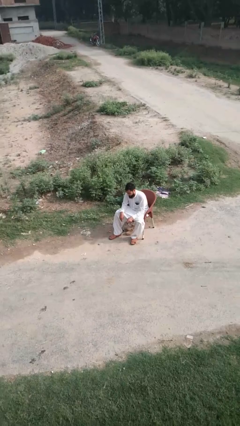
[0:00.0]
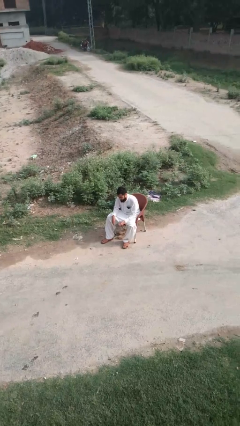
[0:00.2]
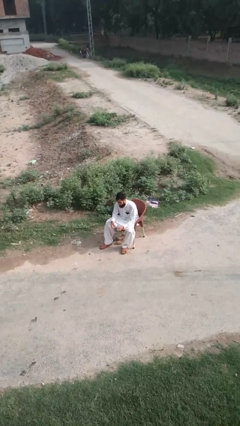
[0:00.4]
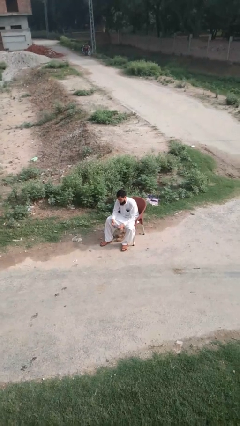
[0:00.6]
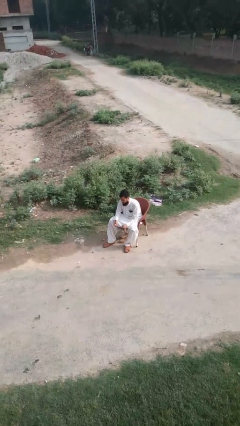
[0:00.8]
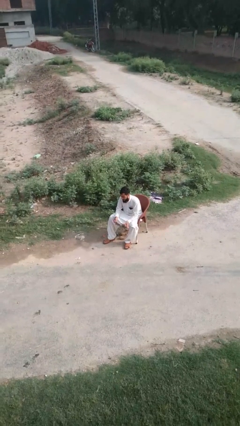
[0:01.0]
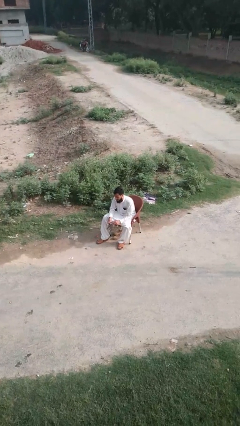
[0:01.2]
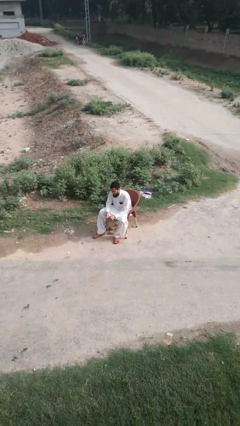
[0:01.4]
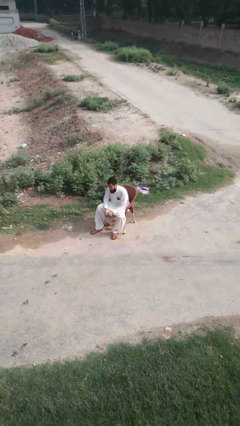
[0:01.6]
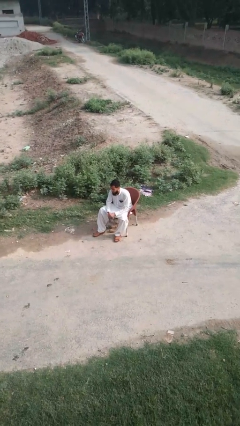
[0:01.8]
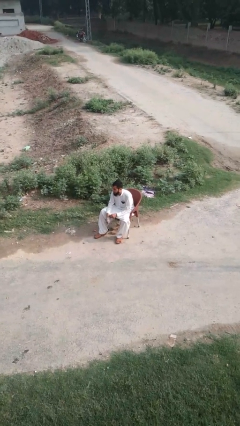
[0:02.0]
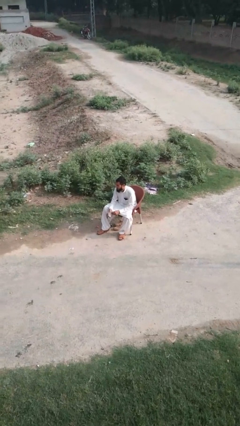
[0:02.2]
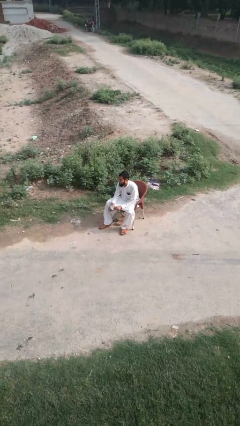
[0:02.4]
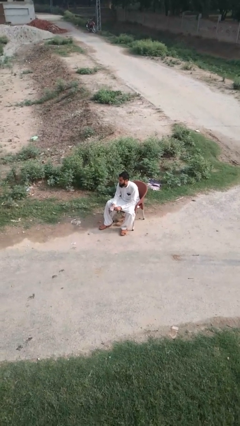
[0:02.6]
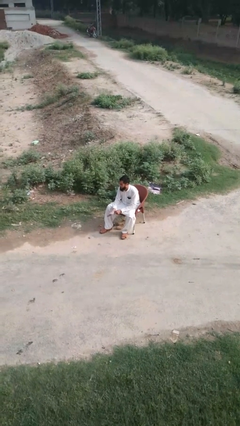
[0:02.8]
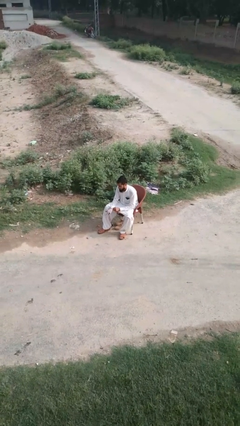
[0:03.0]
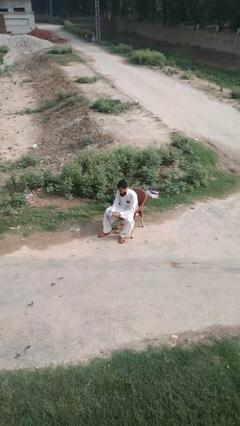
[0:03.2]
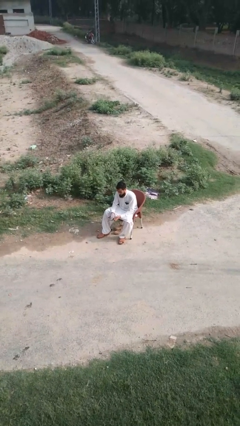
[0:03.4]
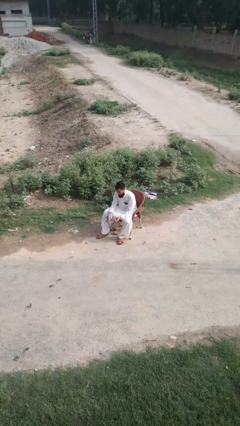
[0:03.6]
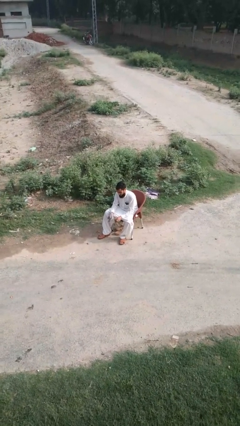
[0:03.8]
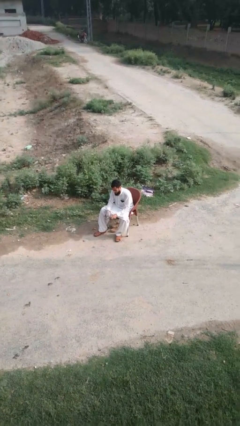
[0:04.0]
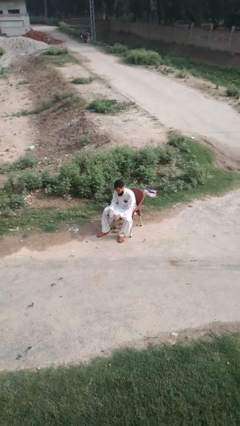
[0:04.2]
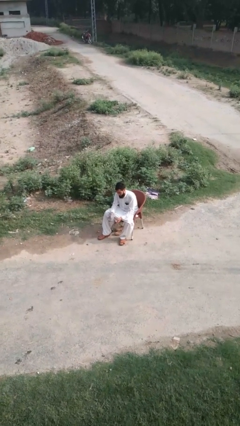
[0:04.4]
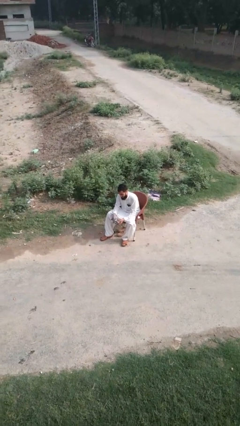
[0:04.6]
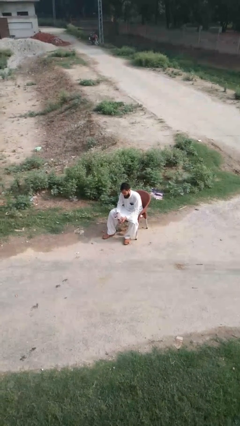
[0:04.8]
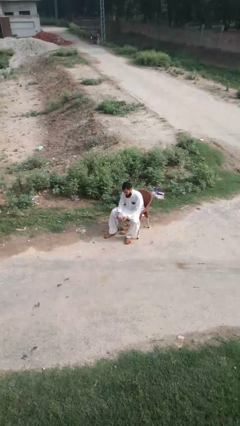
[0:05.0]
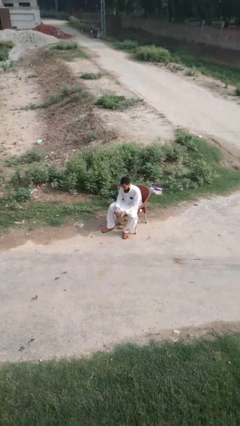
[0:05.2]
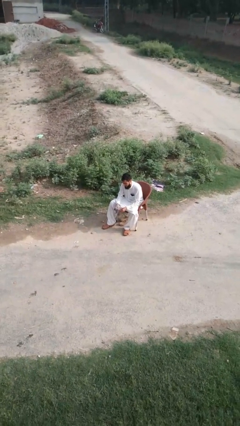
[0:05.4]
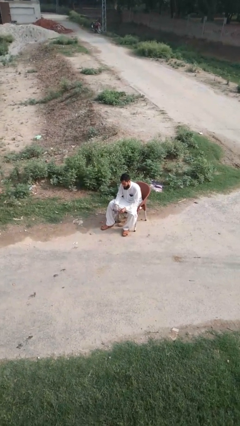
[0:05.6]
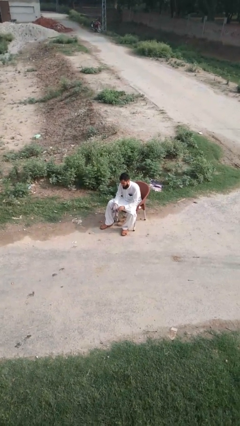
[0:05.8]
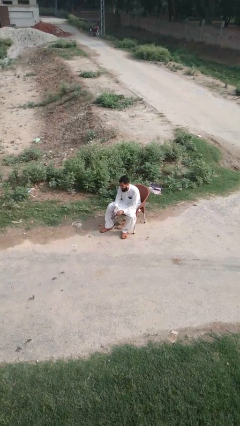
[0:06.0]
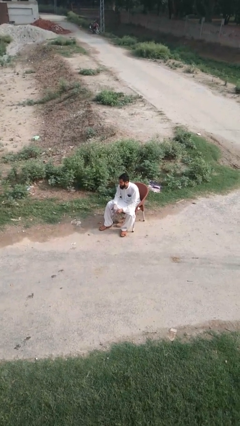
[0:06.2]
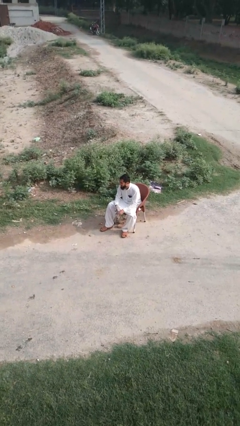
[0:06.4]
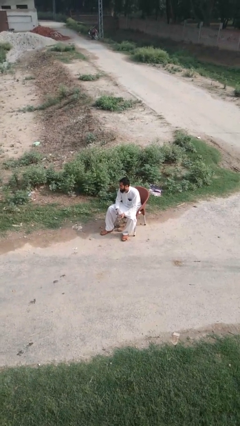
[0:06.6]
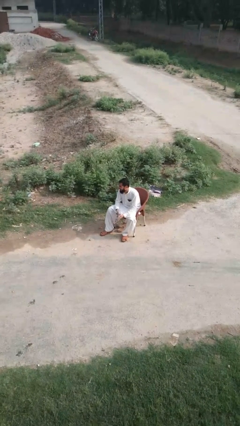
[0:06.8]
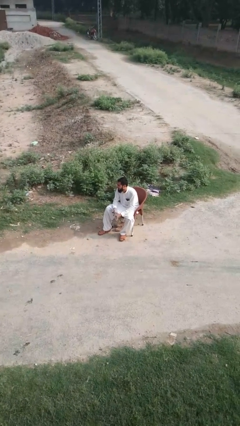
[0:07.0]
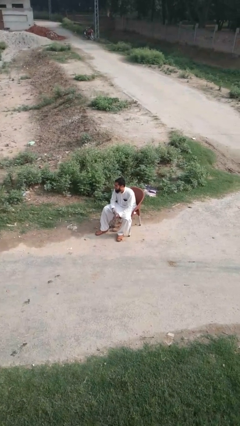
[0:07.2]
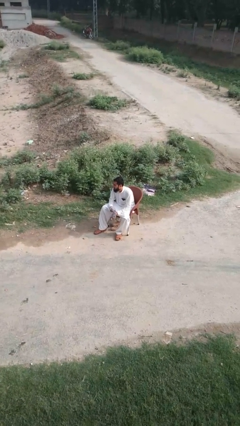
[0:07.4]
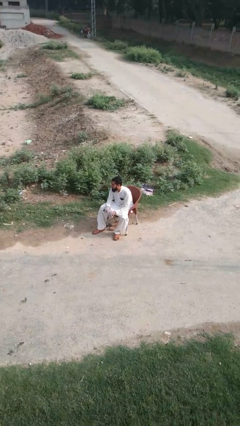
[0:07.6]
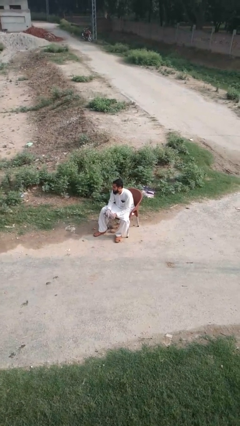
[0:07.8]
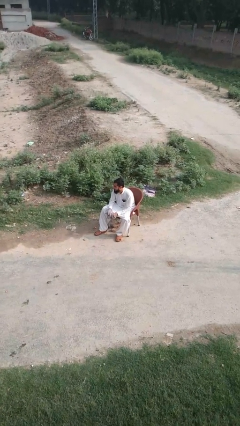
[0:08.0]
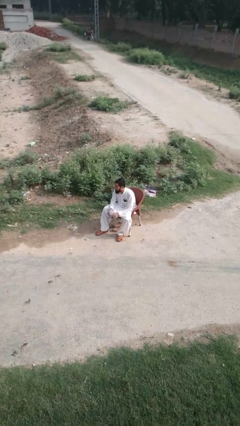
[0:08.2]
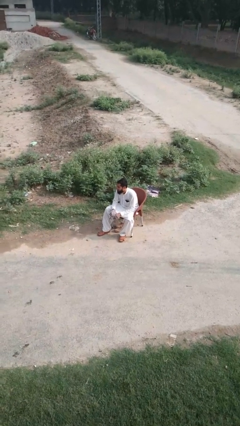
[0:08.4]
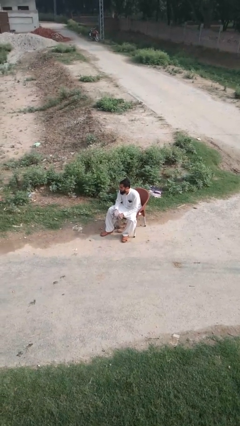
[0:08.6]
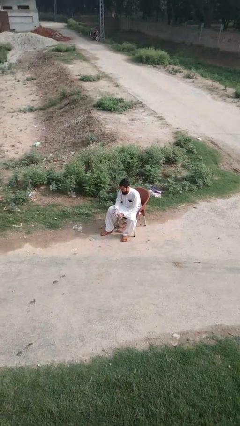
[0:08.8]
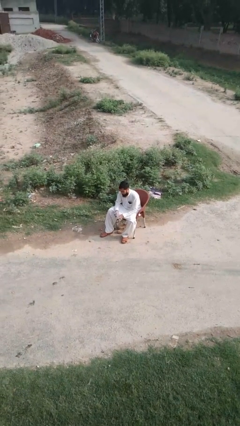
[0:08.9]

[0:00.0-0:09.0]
person puts on gloves

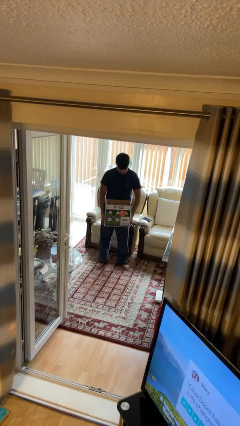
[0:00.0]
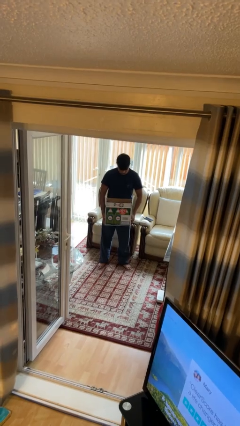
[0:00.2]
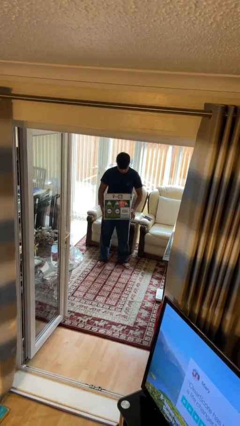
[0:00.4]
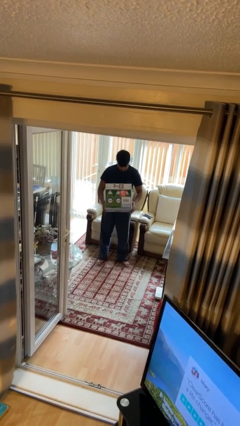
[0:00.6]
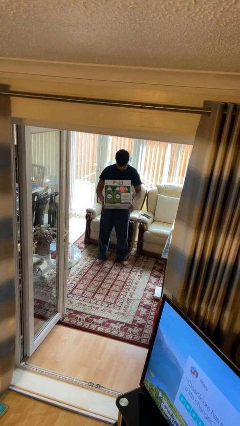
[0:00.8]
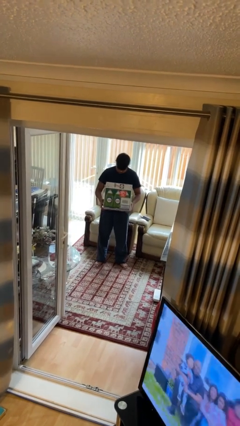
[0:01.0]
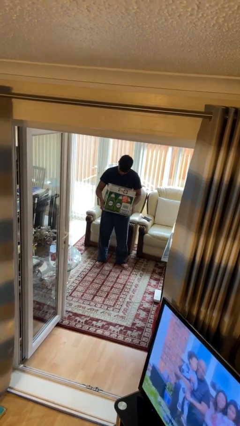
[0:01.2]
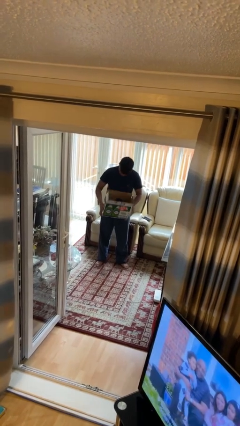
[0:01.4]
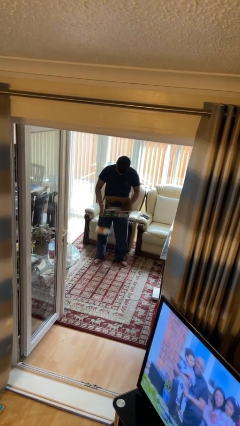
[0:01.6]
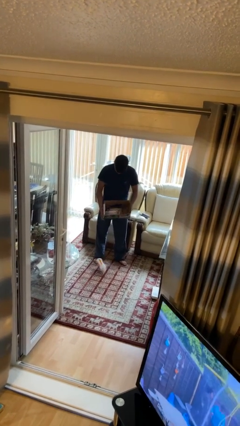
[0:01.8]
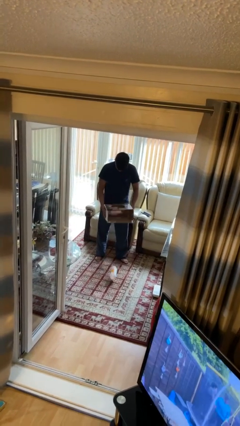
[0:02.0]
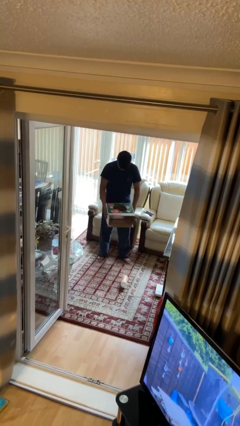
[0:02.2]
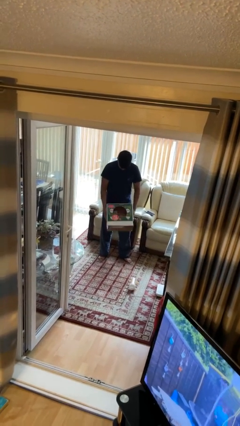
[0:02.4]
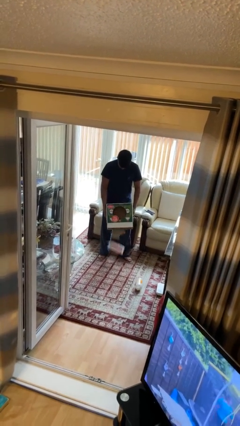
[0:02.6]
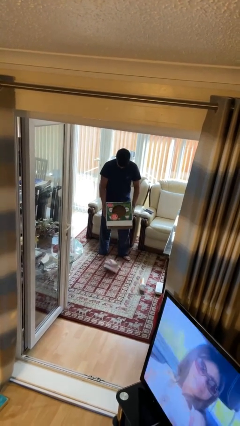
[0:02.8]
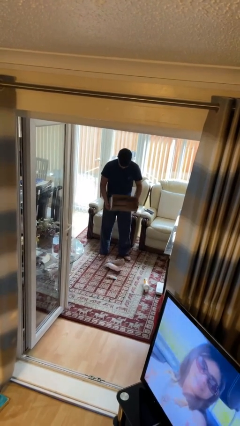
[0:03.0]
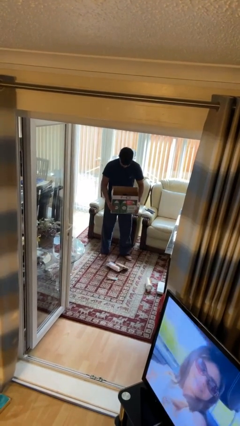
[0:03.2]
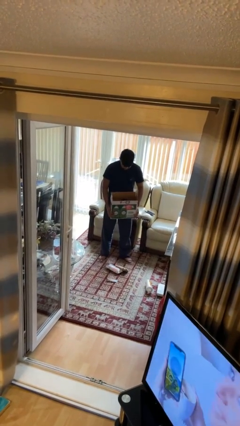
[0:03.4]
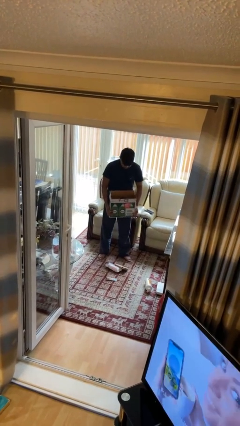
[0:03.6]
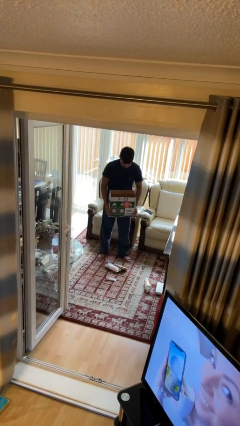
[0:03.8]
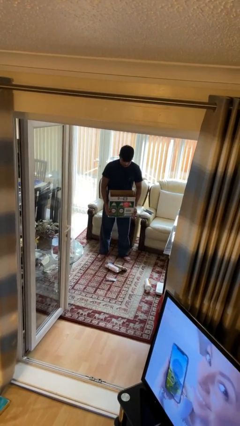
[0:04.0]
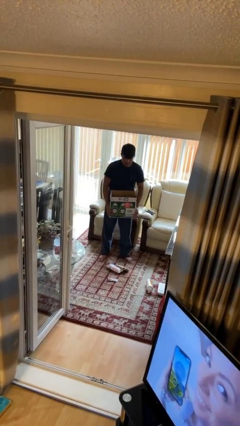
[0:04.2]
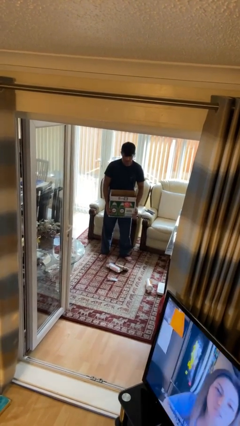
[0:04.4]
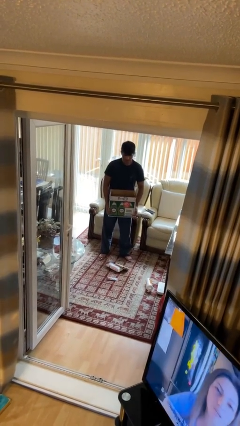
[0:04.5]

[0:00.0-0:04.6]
person unloads box onto floor

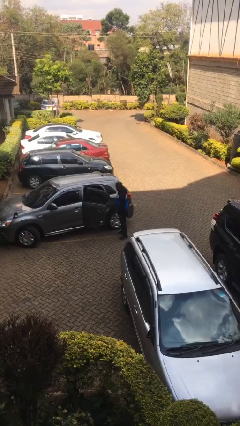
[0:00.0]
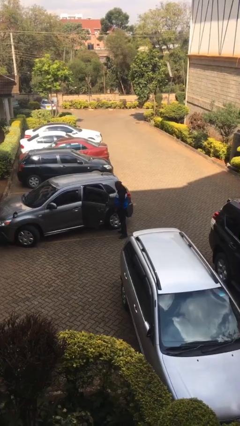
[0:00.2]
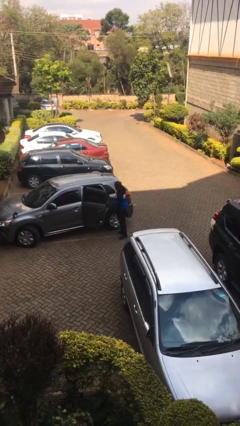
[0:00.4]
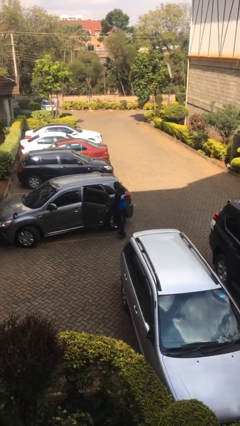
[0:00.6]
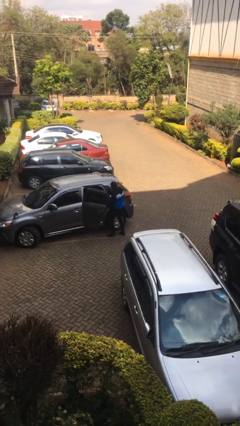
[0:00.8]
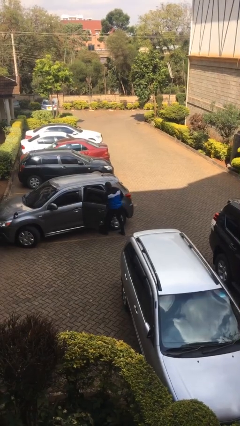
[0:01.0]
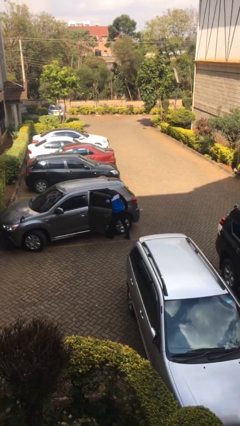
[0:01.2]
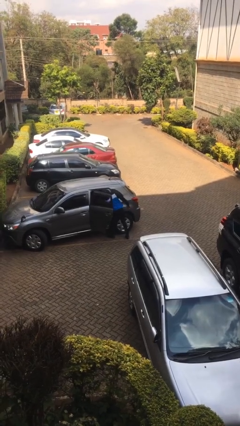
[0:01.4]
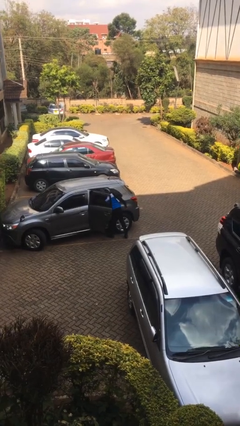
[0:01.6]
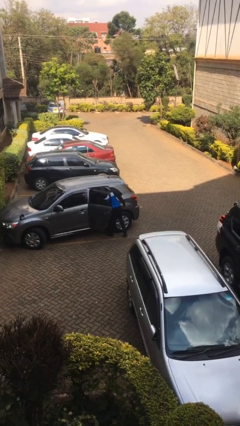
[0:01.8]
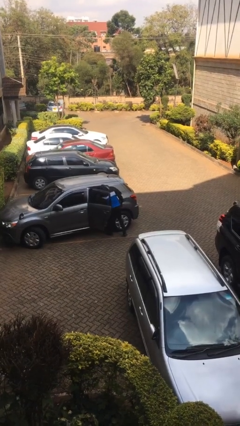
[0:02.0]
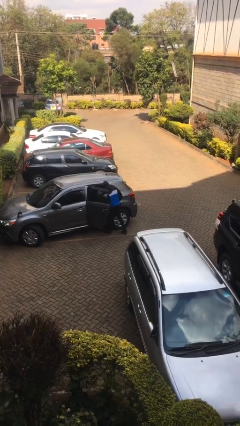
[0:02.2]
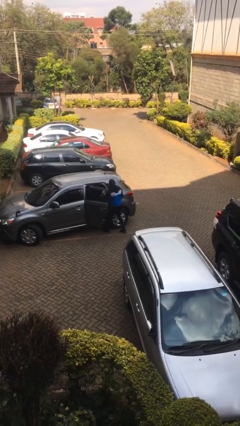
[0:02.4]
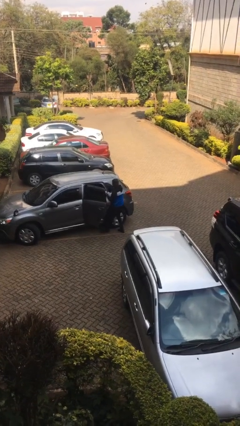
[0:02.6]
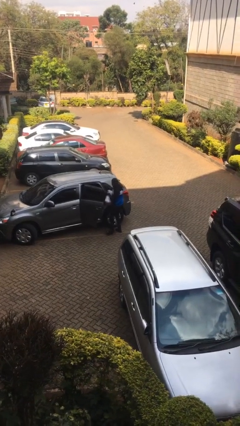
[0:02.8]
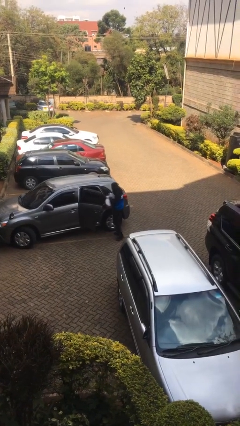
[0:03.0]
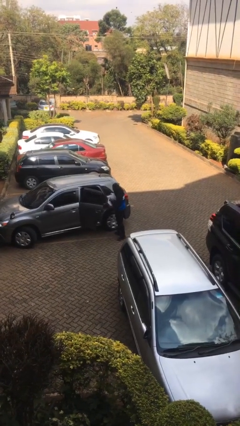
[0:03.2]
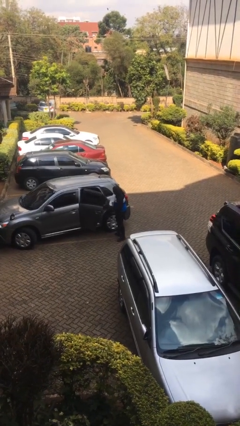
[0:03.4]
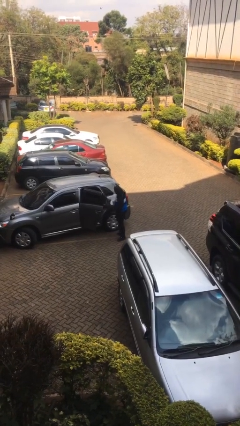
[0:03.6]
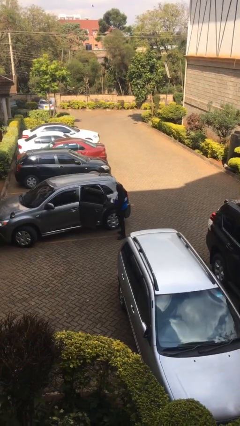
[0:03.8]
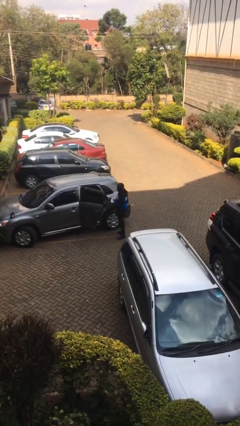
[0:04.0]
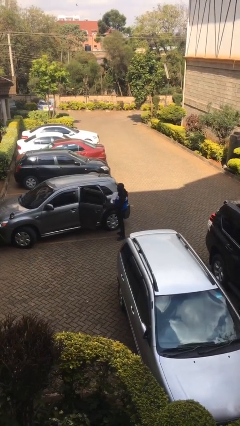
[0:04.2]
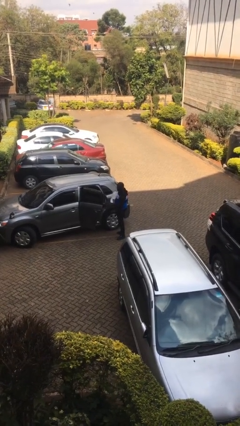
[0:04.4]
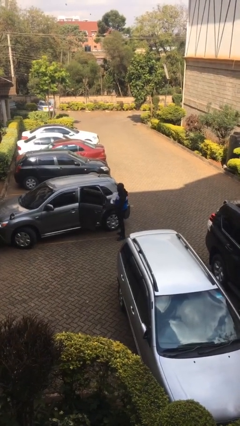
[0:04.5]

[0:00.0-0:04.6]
person unloads car
